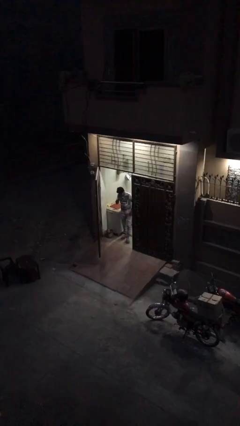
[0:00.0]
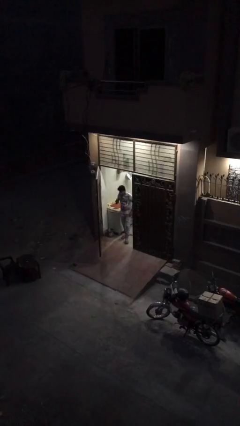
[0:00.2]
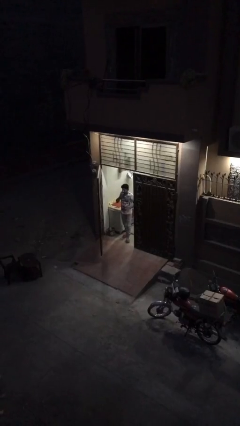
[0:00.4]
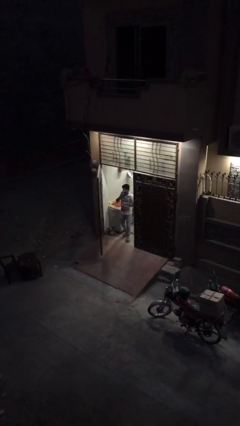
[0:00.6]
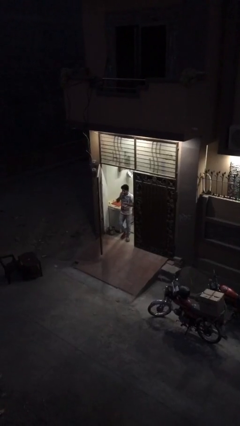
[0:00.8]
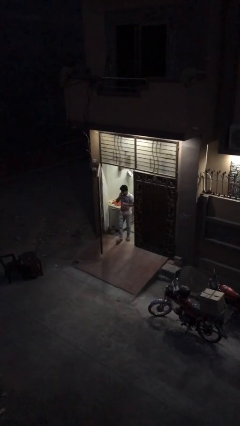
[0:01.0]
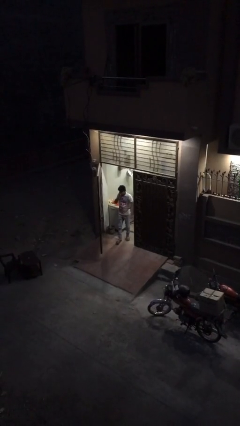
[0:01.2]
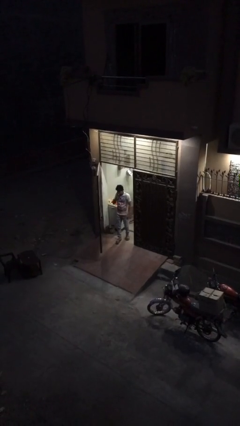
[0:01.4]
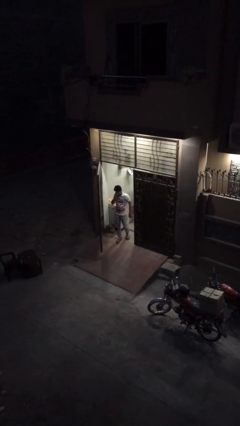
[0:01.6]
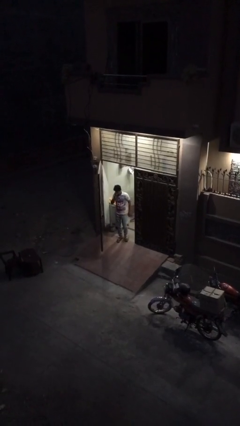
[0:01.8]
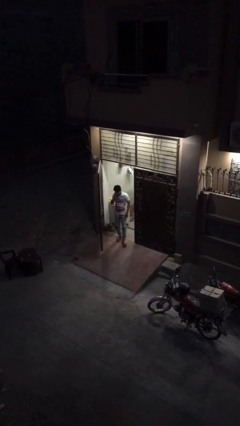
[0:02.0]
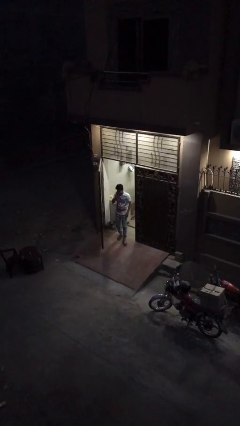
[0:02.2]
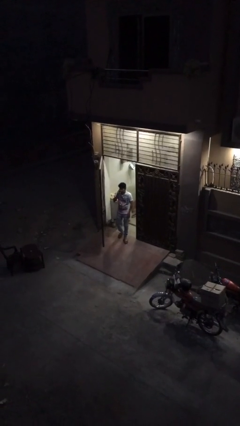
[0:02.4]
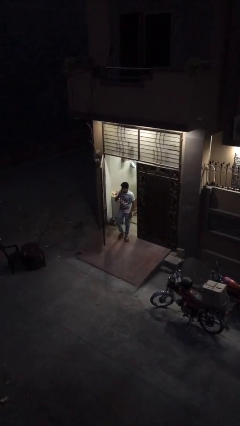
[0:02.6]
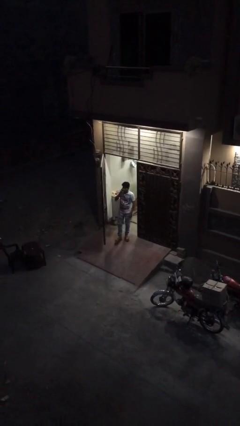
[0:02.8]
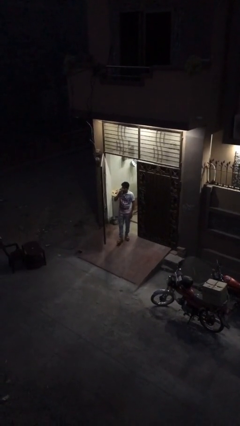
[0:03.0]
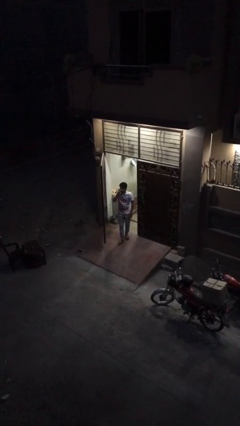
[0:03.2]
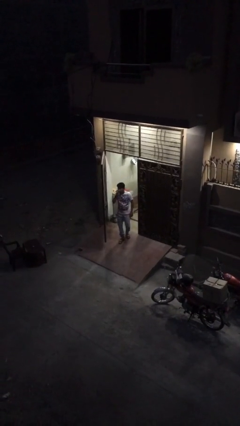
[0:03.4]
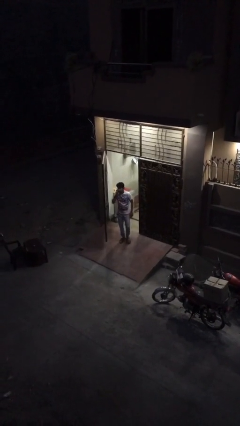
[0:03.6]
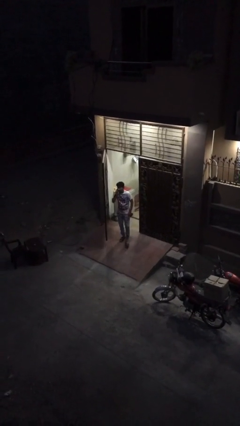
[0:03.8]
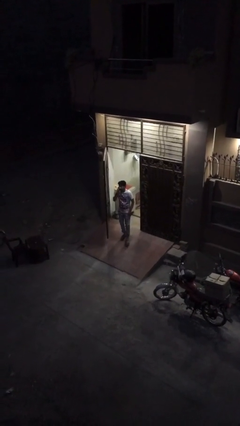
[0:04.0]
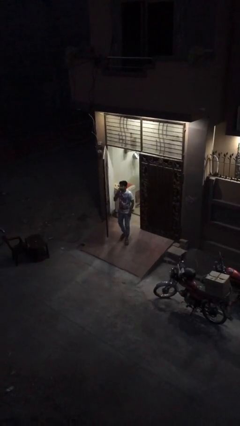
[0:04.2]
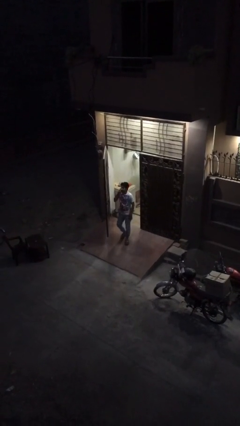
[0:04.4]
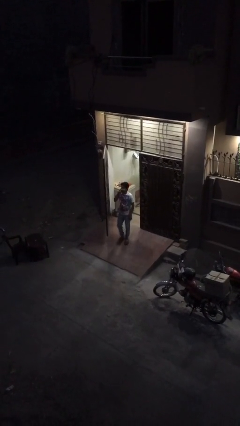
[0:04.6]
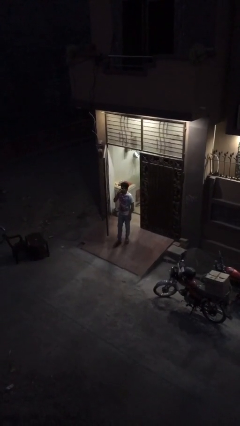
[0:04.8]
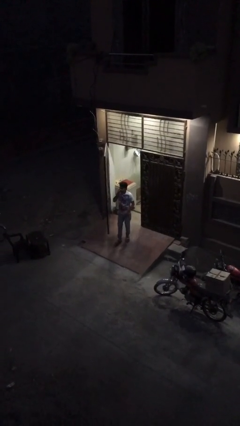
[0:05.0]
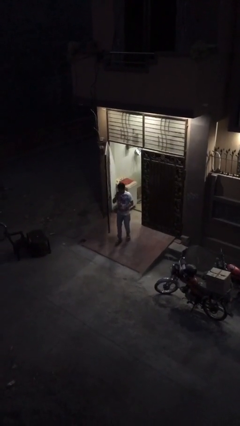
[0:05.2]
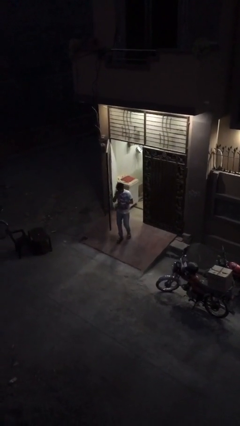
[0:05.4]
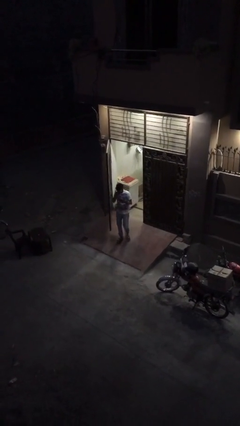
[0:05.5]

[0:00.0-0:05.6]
person enters scene through structure

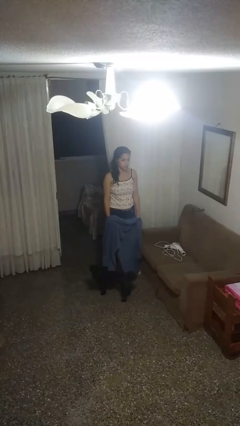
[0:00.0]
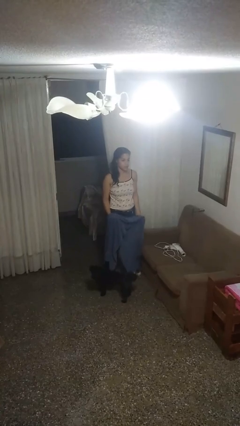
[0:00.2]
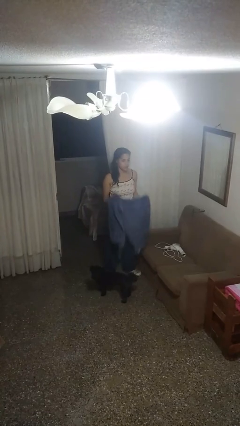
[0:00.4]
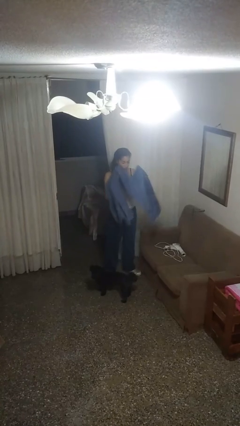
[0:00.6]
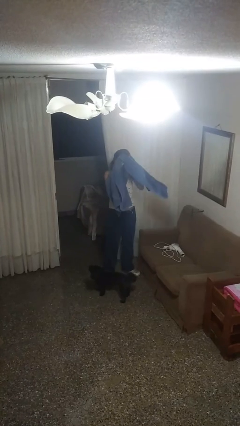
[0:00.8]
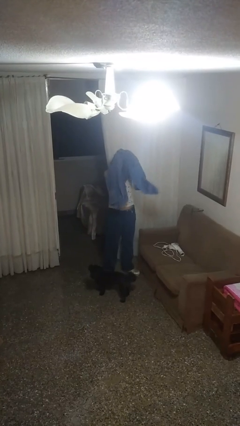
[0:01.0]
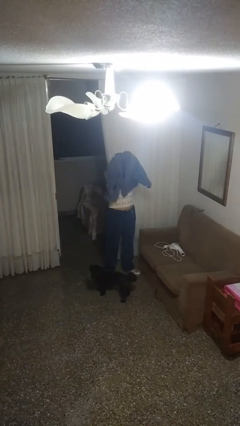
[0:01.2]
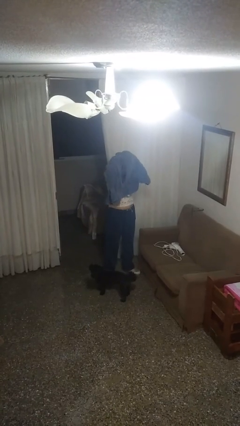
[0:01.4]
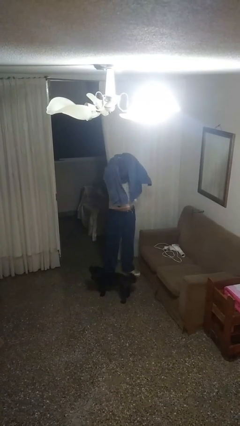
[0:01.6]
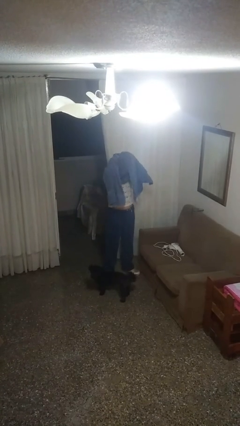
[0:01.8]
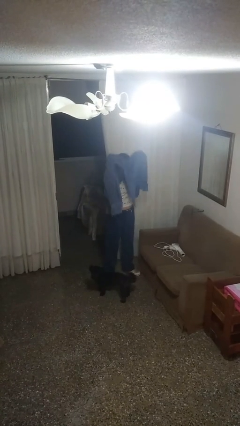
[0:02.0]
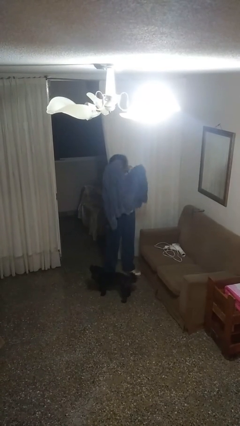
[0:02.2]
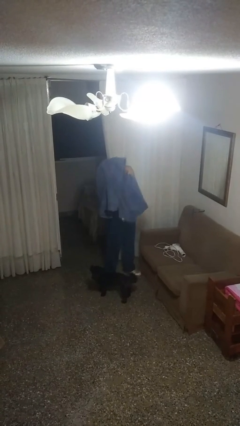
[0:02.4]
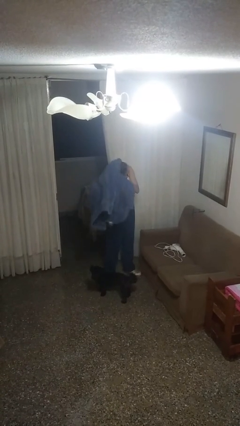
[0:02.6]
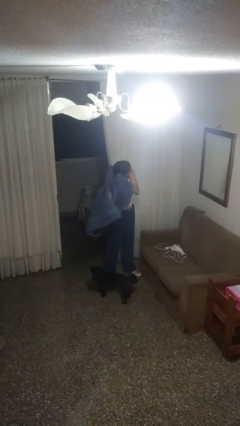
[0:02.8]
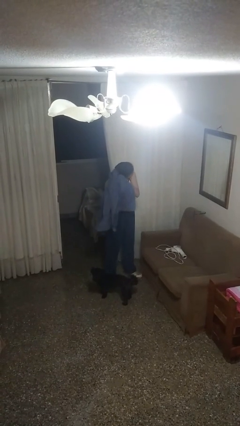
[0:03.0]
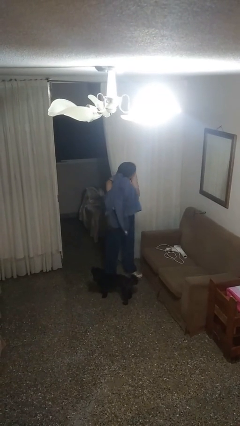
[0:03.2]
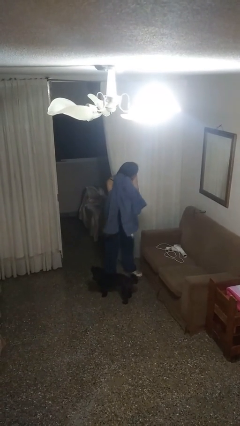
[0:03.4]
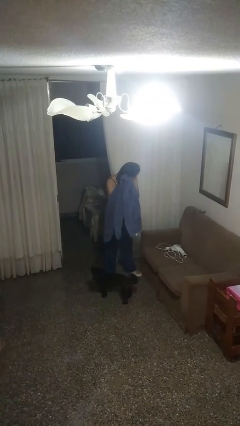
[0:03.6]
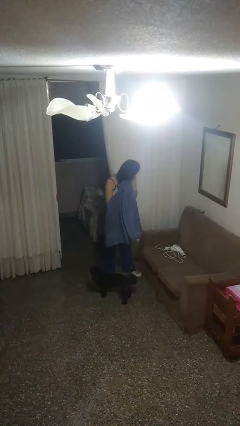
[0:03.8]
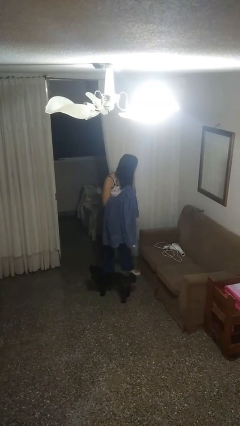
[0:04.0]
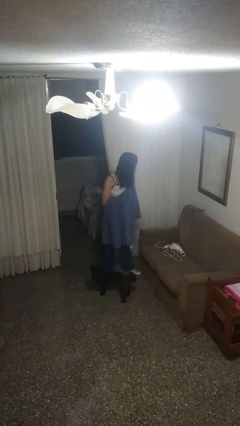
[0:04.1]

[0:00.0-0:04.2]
person dries hair with towel

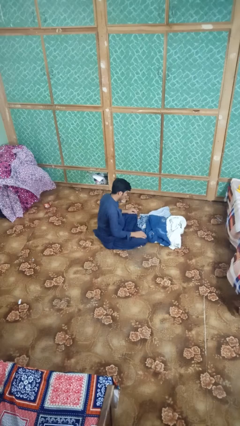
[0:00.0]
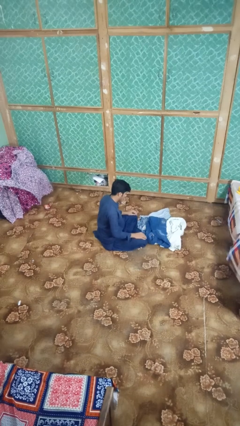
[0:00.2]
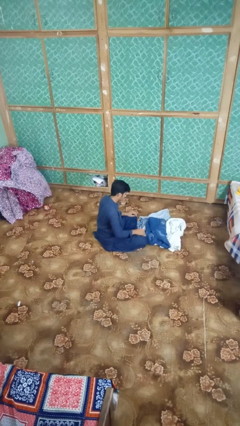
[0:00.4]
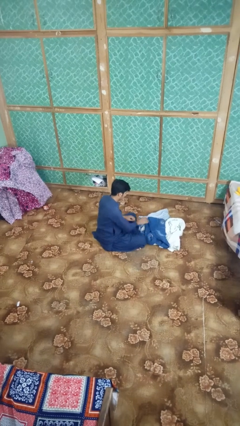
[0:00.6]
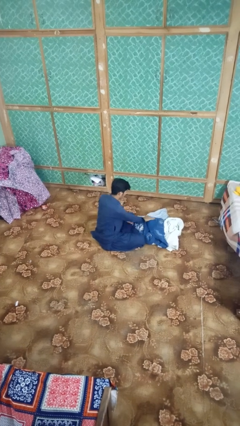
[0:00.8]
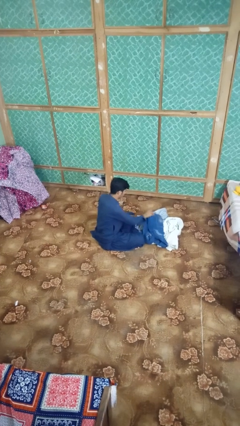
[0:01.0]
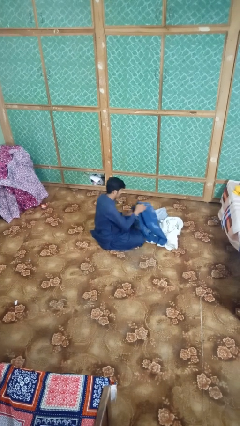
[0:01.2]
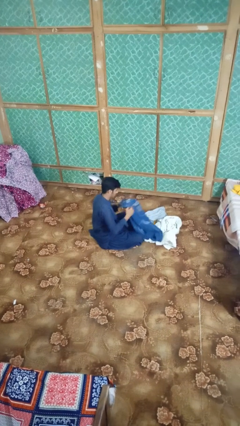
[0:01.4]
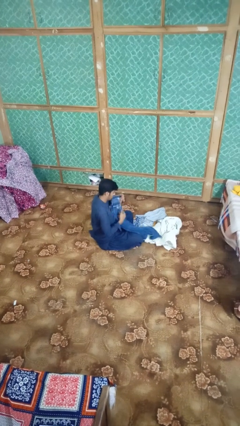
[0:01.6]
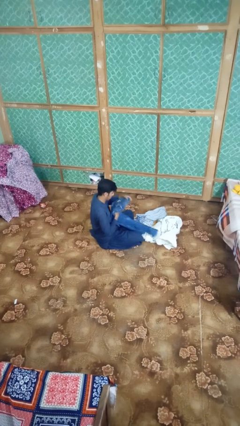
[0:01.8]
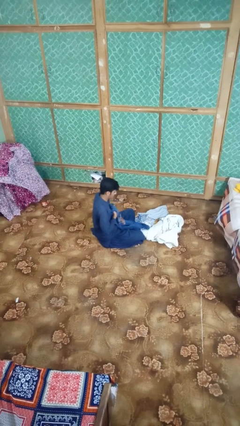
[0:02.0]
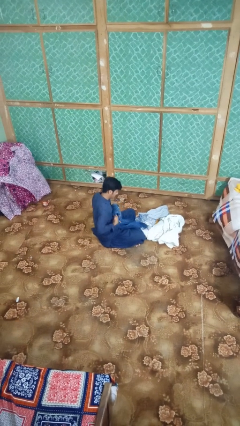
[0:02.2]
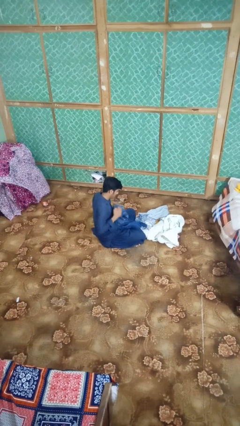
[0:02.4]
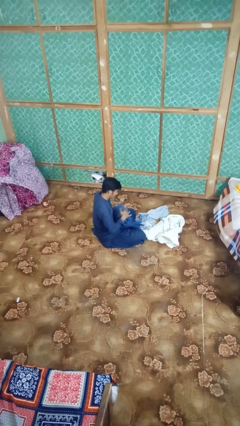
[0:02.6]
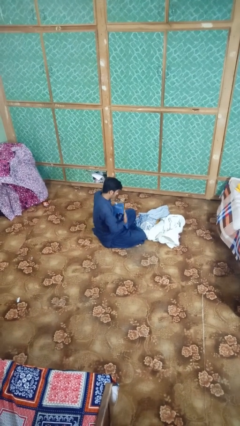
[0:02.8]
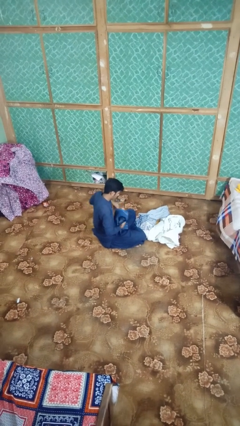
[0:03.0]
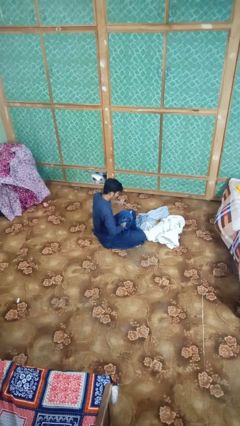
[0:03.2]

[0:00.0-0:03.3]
person folds pants

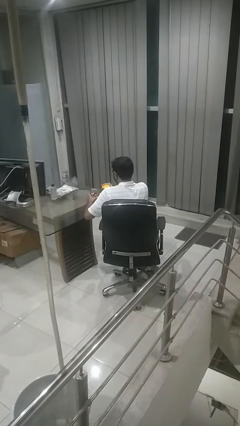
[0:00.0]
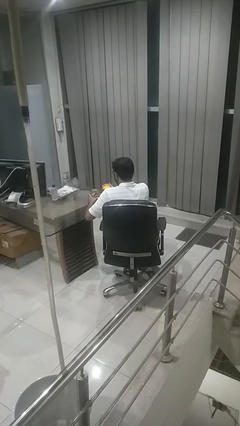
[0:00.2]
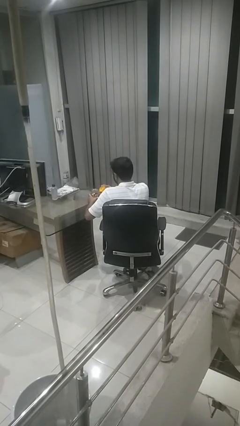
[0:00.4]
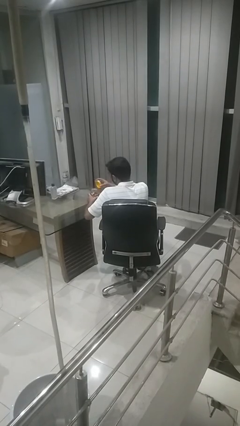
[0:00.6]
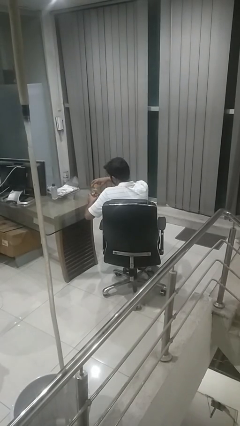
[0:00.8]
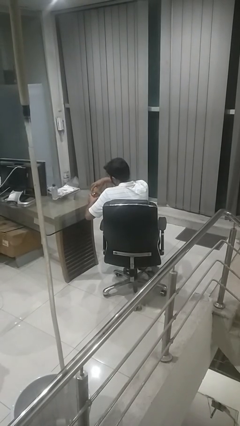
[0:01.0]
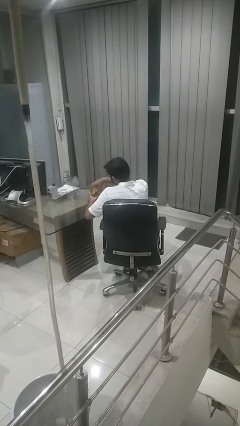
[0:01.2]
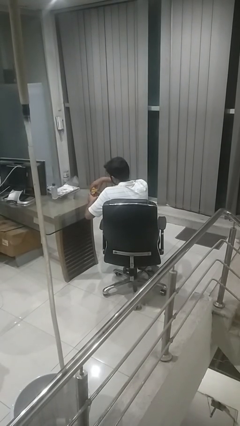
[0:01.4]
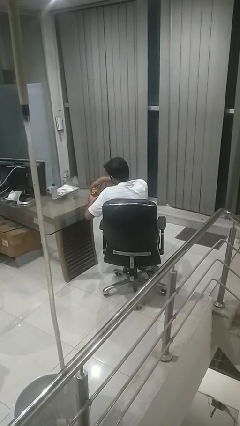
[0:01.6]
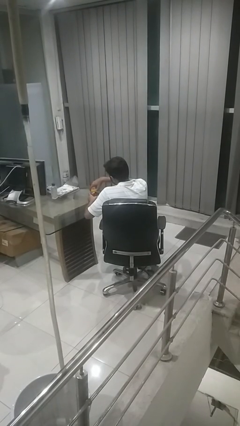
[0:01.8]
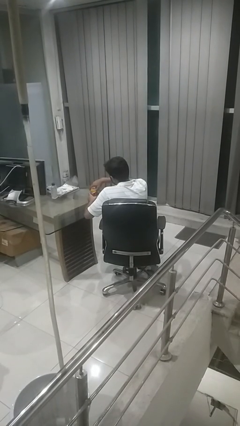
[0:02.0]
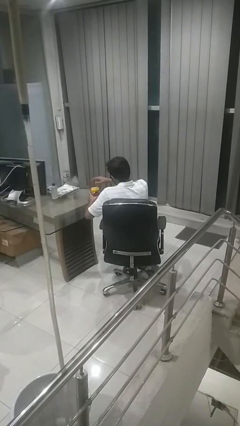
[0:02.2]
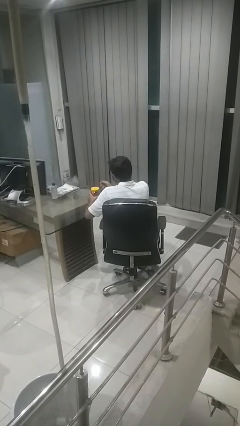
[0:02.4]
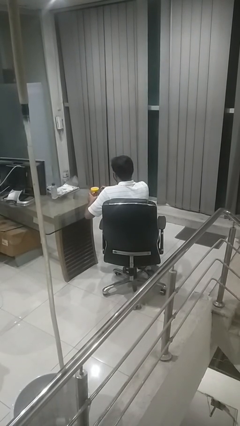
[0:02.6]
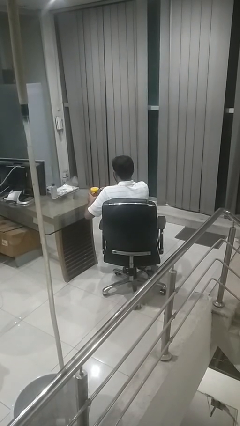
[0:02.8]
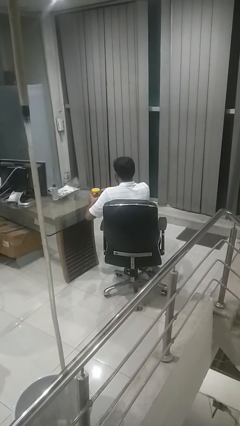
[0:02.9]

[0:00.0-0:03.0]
person closes jar

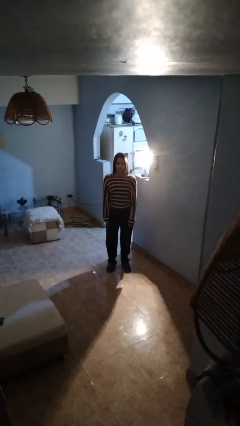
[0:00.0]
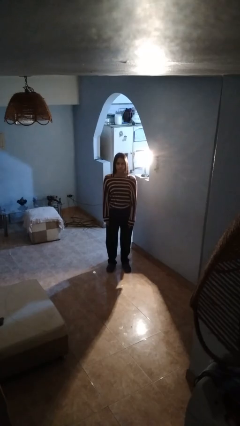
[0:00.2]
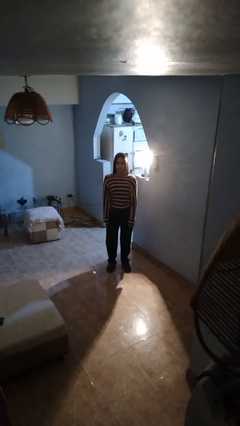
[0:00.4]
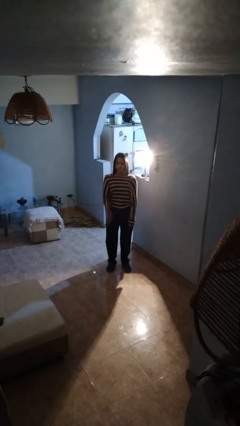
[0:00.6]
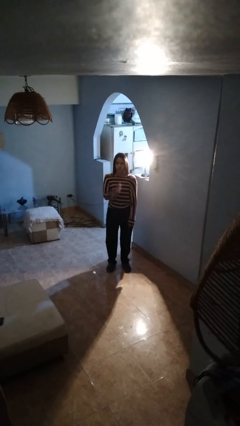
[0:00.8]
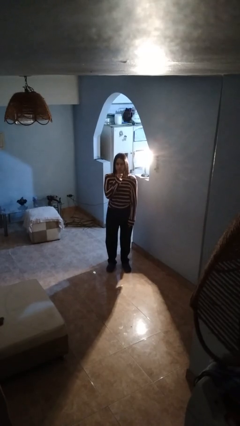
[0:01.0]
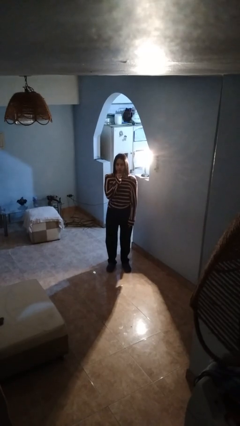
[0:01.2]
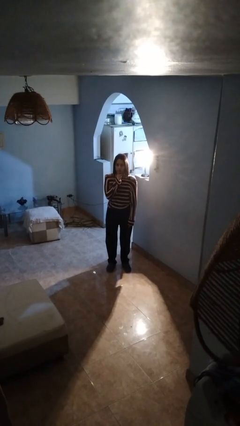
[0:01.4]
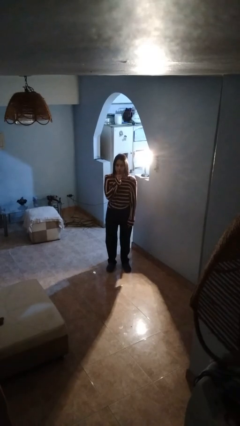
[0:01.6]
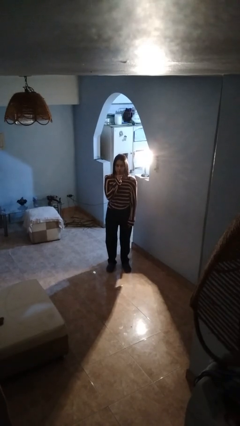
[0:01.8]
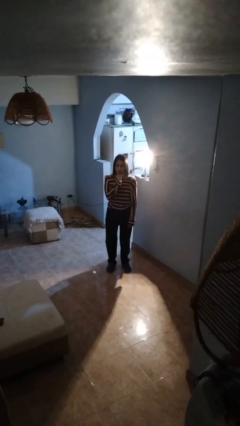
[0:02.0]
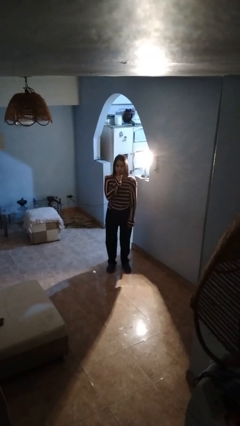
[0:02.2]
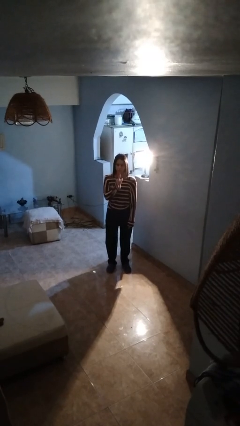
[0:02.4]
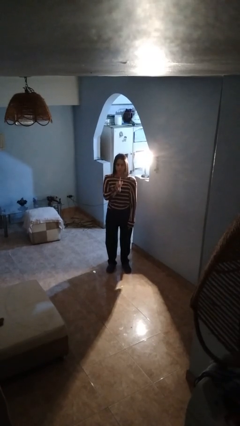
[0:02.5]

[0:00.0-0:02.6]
person gestures be quiet
